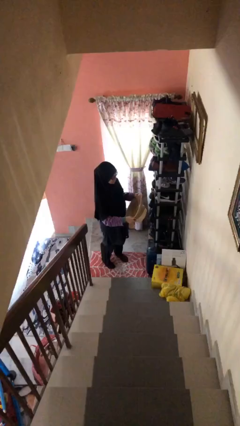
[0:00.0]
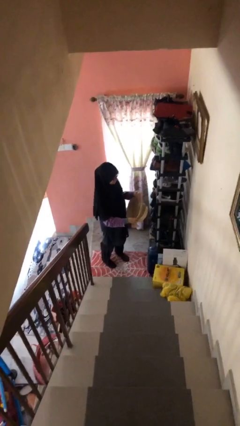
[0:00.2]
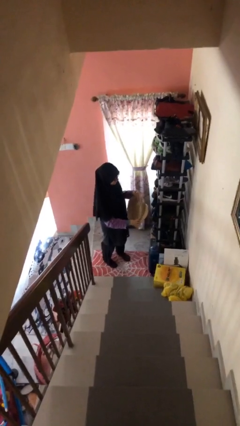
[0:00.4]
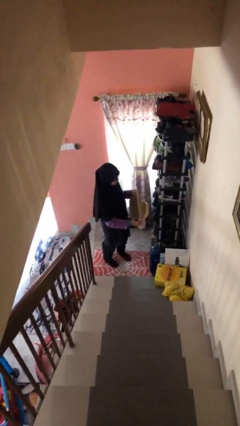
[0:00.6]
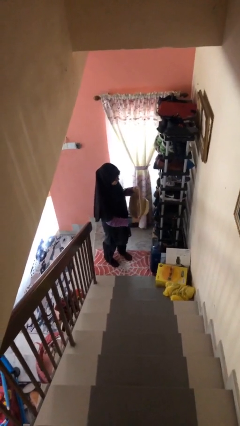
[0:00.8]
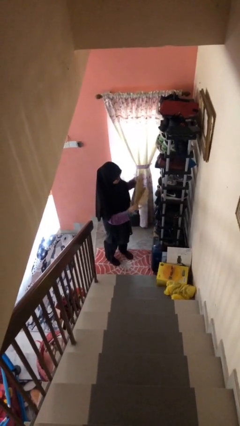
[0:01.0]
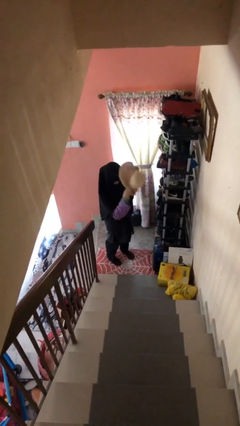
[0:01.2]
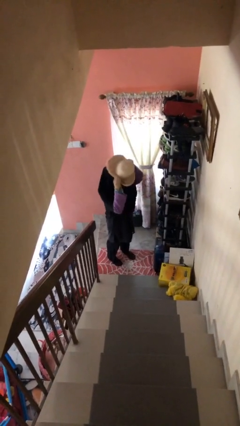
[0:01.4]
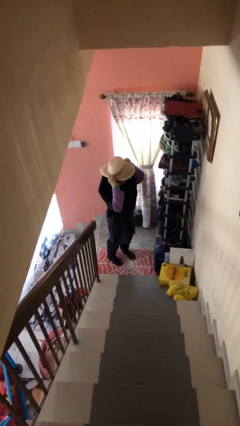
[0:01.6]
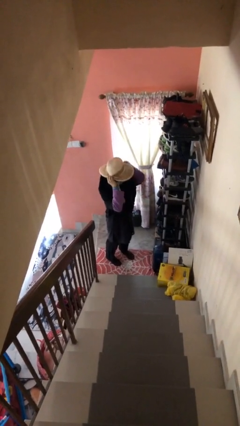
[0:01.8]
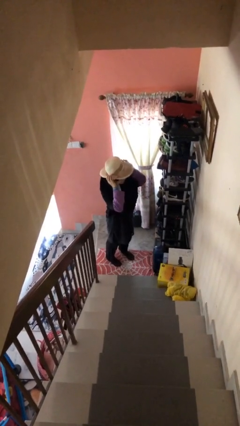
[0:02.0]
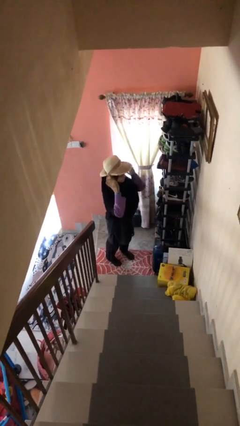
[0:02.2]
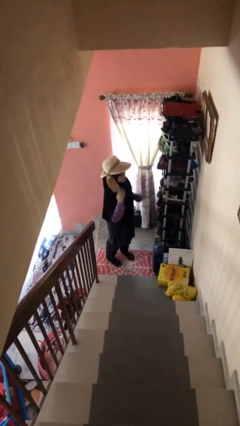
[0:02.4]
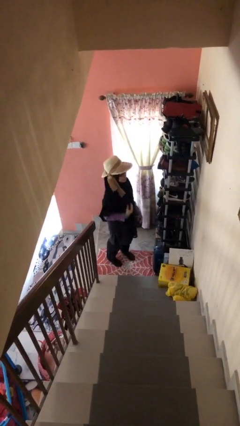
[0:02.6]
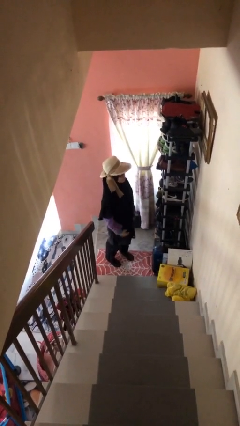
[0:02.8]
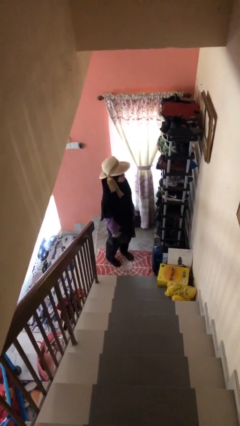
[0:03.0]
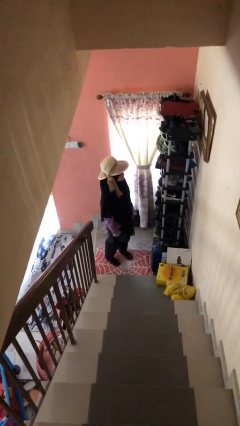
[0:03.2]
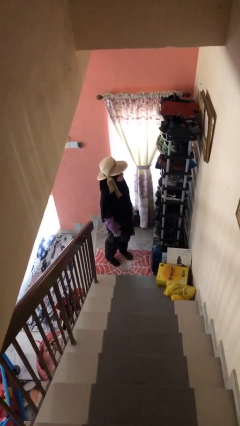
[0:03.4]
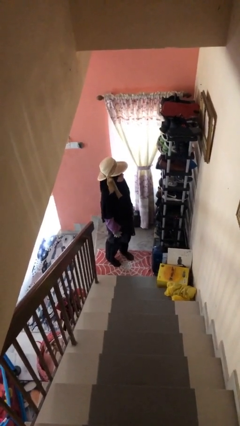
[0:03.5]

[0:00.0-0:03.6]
person puts on hat

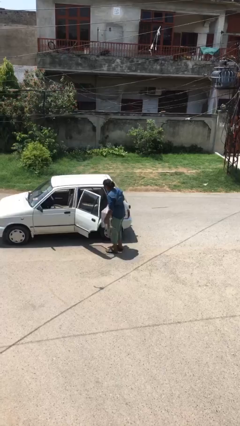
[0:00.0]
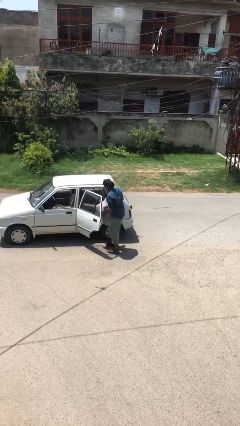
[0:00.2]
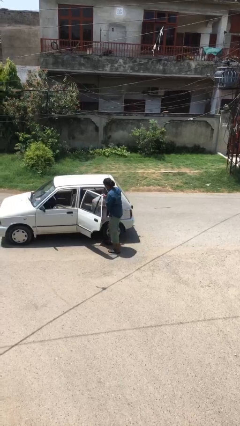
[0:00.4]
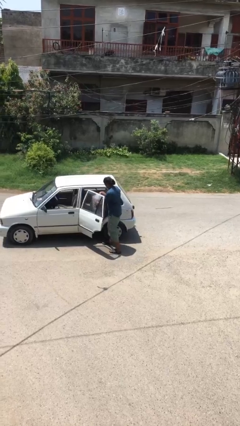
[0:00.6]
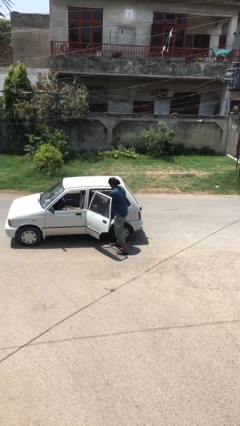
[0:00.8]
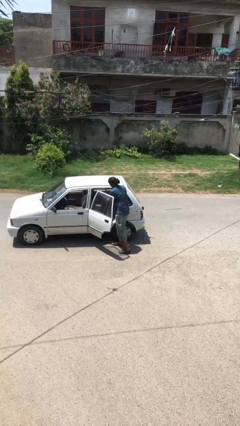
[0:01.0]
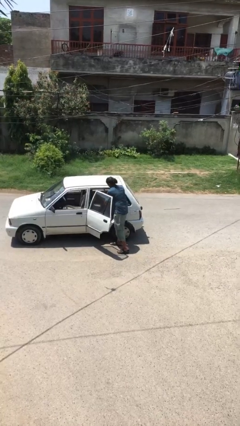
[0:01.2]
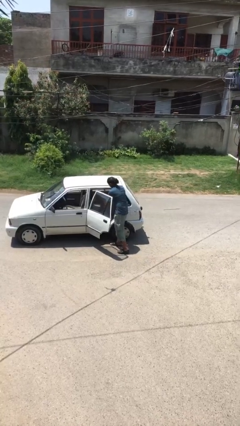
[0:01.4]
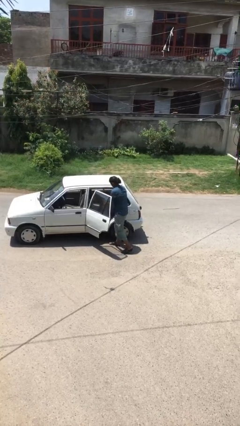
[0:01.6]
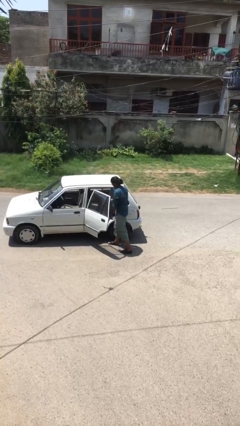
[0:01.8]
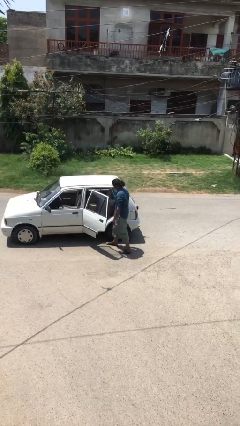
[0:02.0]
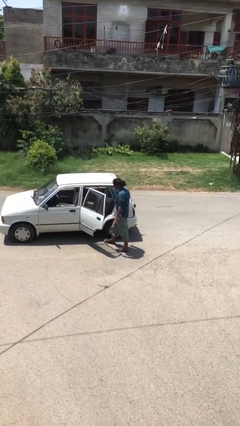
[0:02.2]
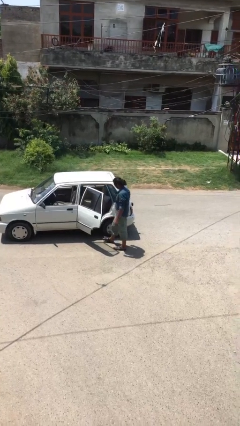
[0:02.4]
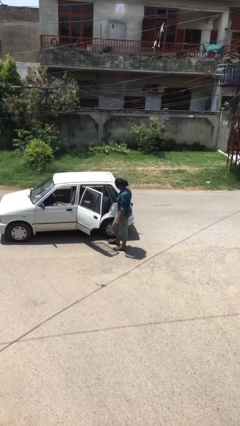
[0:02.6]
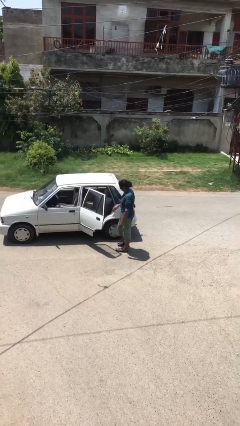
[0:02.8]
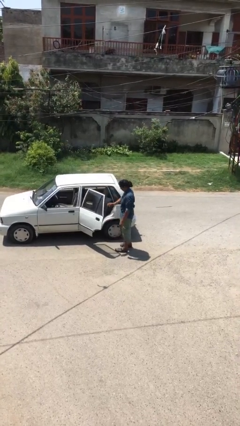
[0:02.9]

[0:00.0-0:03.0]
person loads car

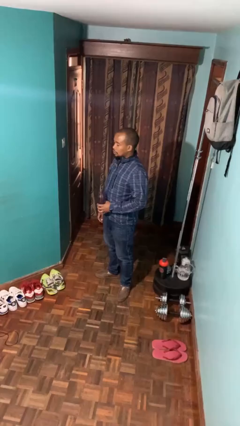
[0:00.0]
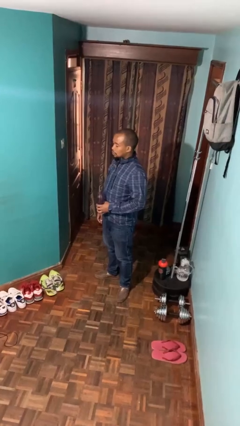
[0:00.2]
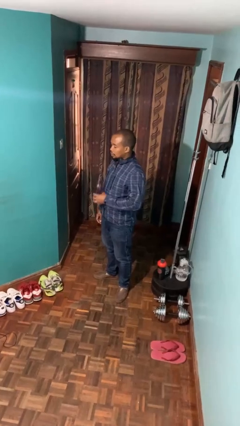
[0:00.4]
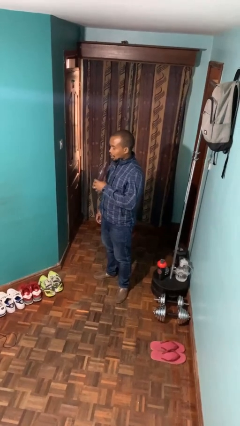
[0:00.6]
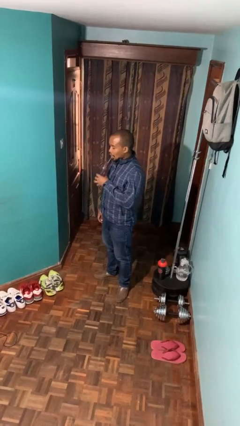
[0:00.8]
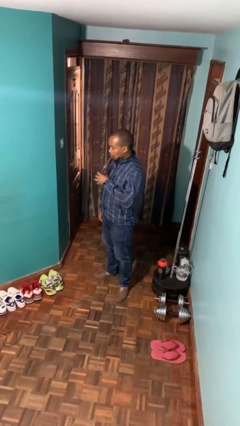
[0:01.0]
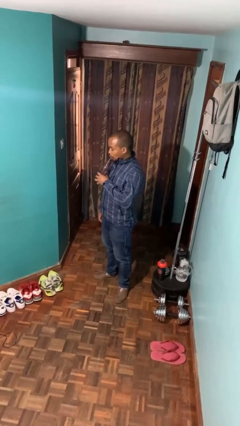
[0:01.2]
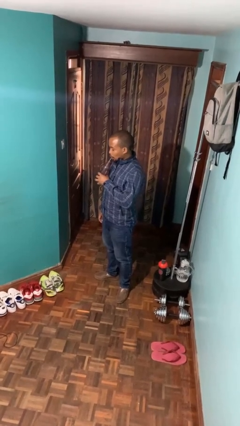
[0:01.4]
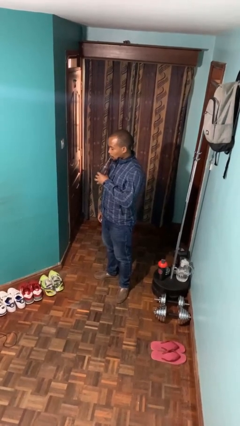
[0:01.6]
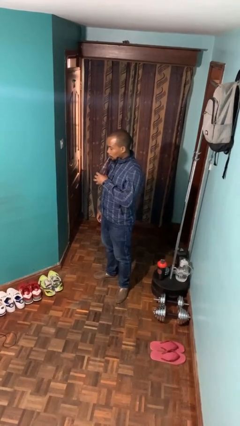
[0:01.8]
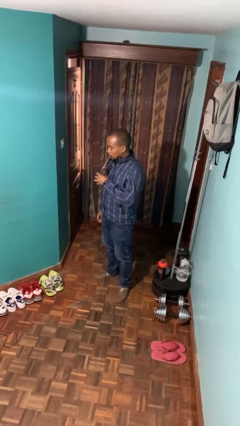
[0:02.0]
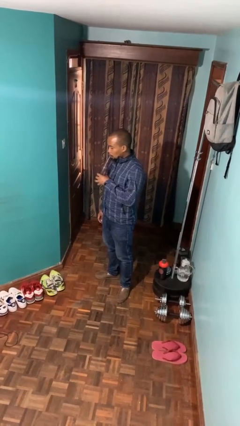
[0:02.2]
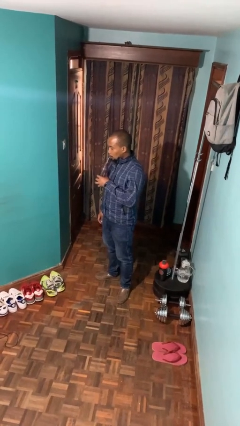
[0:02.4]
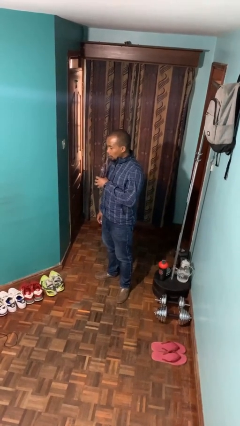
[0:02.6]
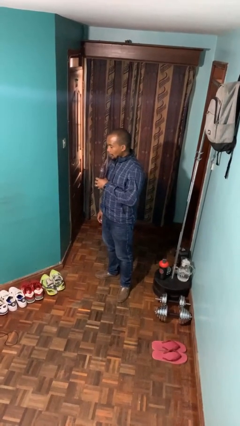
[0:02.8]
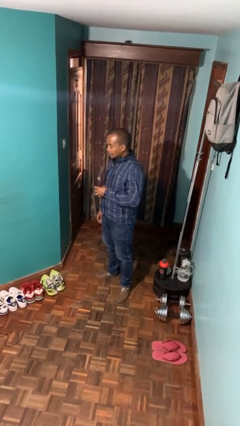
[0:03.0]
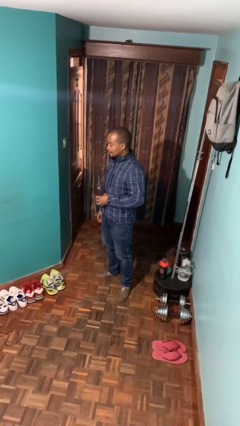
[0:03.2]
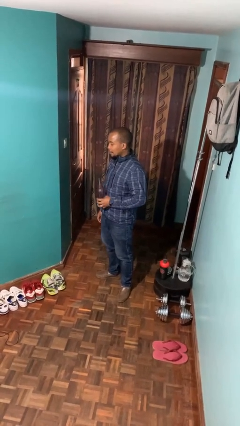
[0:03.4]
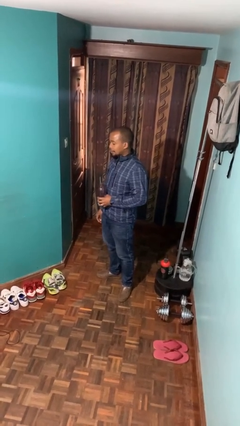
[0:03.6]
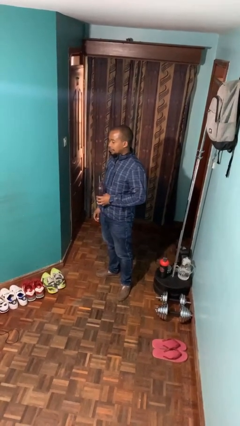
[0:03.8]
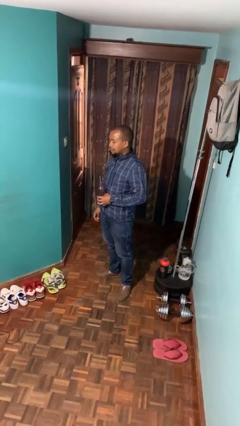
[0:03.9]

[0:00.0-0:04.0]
person drinks from straw

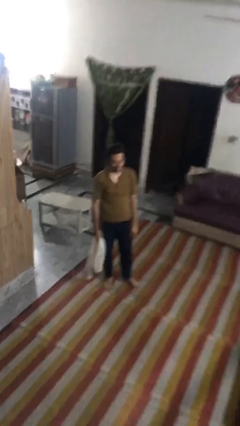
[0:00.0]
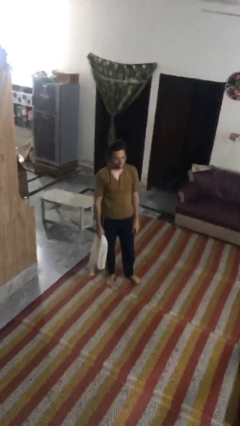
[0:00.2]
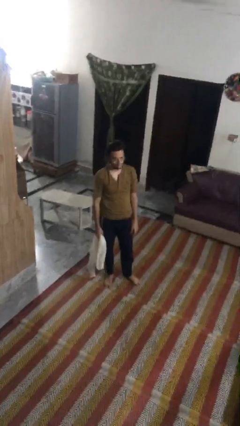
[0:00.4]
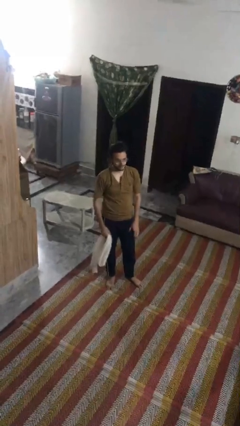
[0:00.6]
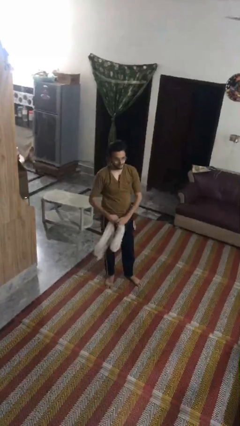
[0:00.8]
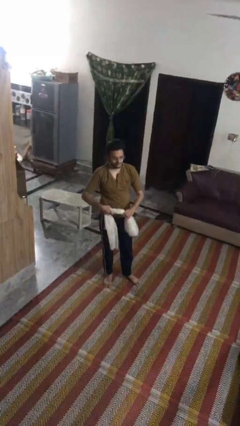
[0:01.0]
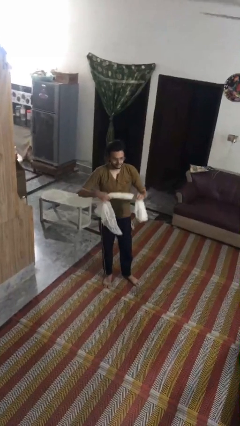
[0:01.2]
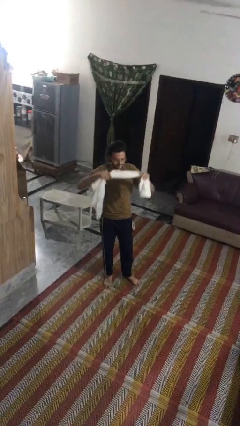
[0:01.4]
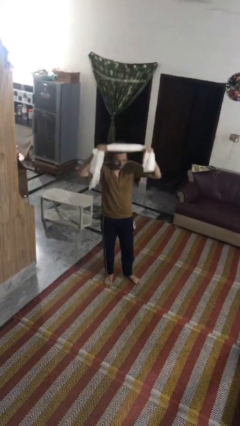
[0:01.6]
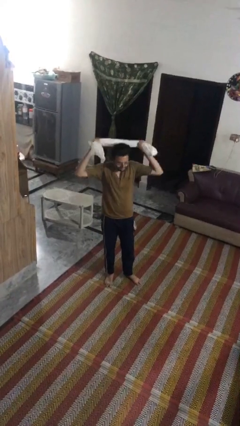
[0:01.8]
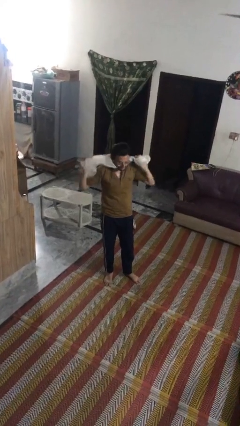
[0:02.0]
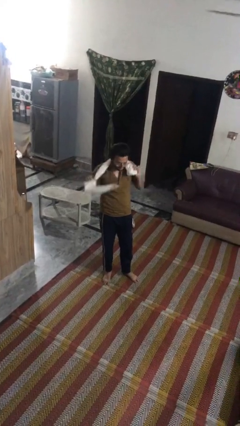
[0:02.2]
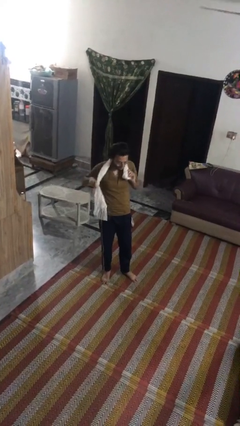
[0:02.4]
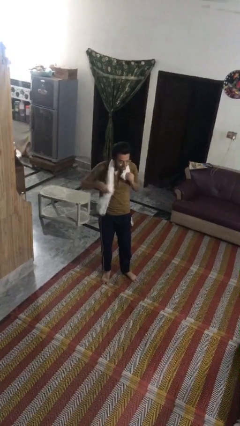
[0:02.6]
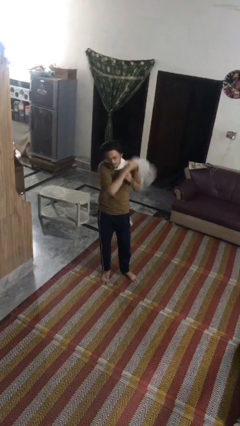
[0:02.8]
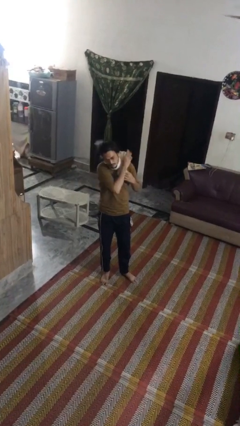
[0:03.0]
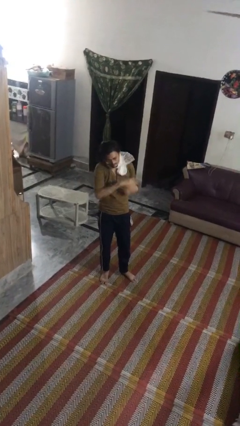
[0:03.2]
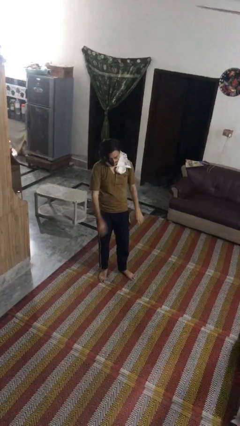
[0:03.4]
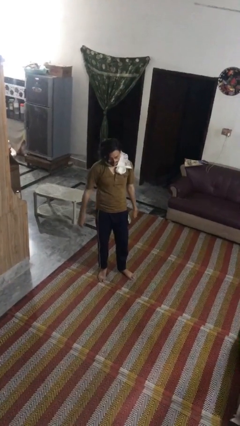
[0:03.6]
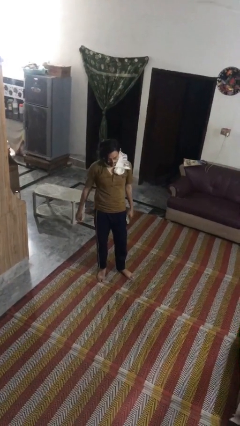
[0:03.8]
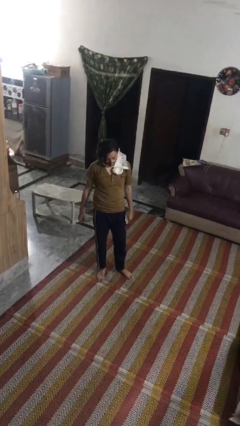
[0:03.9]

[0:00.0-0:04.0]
person puts on scarf

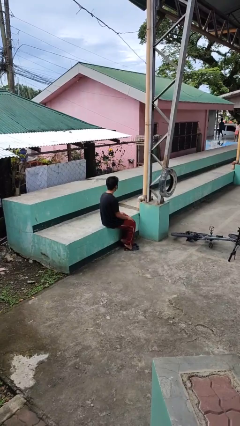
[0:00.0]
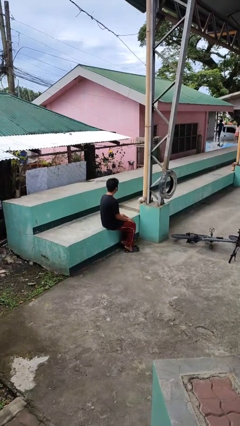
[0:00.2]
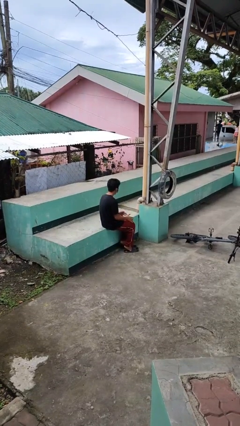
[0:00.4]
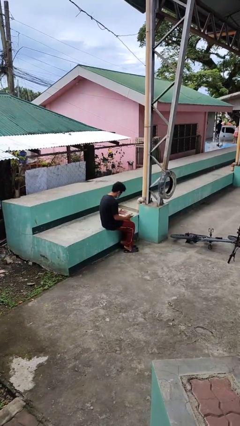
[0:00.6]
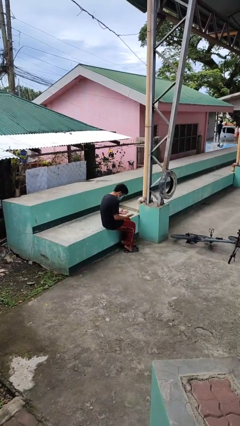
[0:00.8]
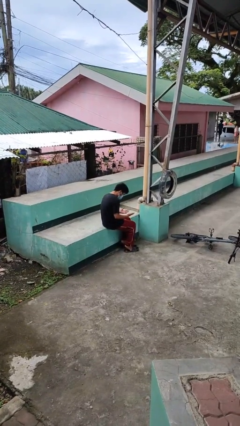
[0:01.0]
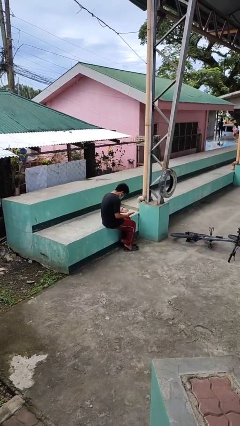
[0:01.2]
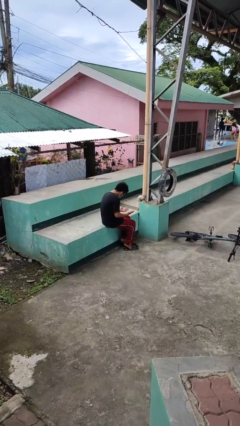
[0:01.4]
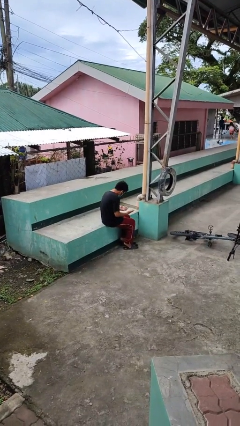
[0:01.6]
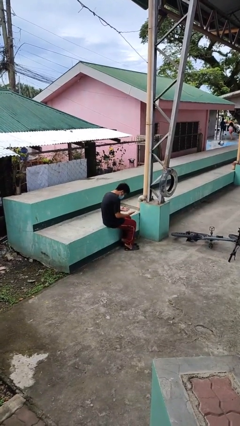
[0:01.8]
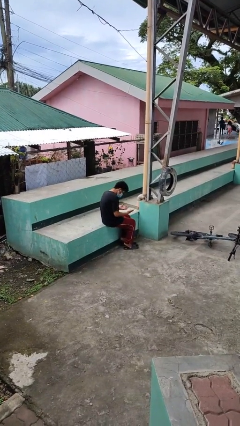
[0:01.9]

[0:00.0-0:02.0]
person looks at hands in lap

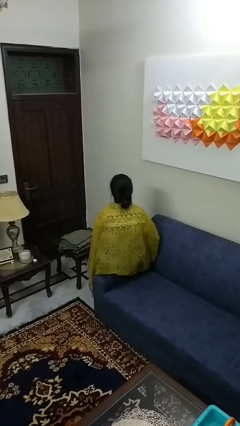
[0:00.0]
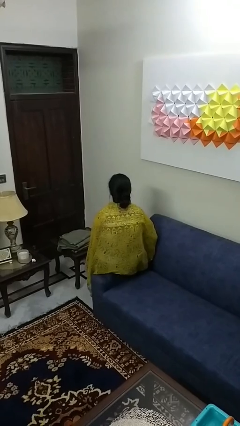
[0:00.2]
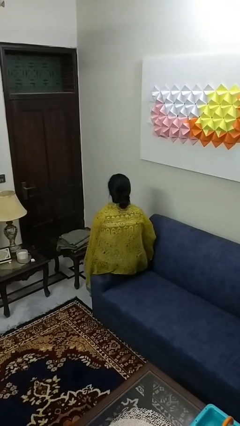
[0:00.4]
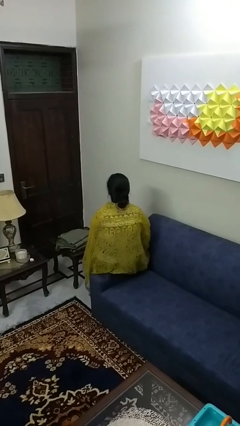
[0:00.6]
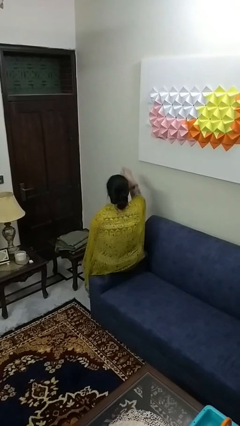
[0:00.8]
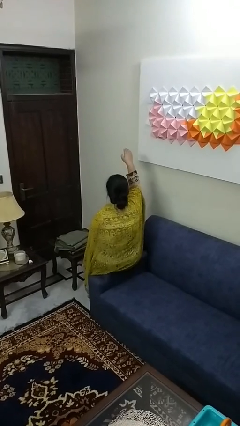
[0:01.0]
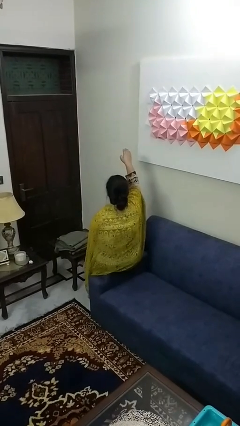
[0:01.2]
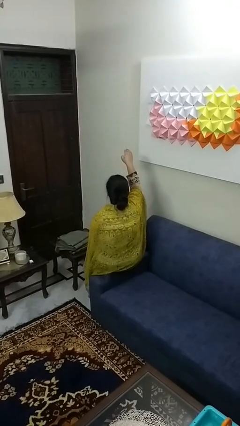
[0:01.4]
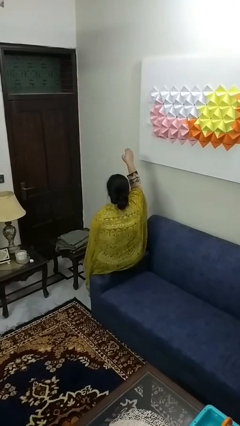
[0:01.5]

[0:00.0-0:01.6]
person gestures swipe up
